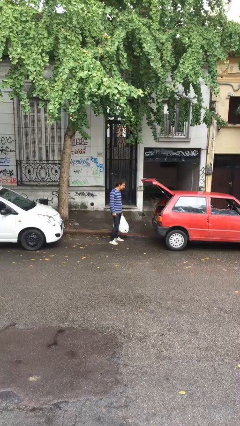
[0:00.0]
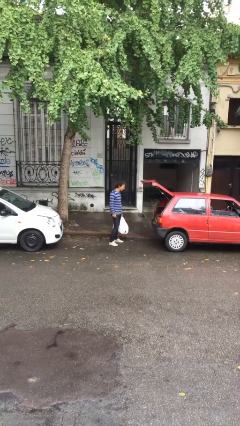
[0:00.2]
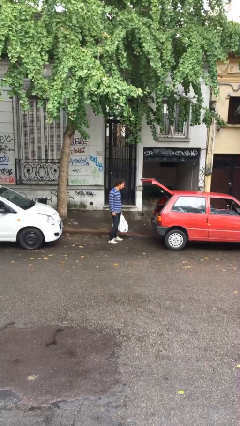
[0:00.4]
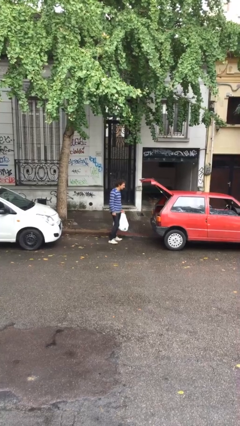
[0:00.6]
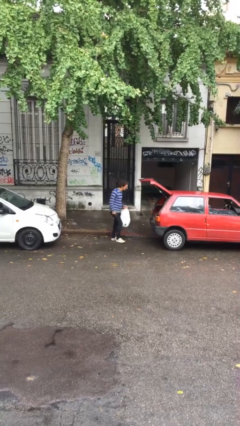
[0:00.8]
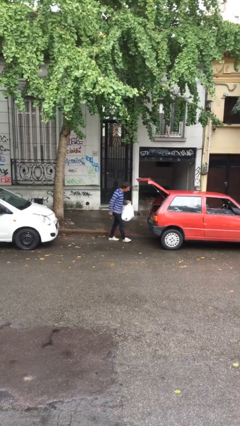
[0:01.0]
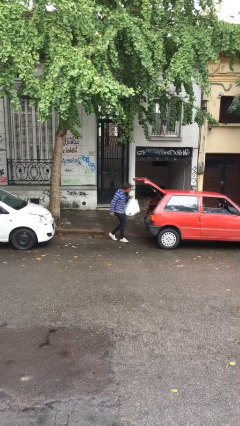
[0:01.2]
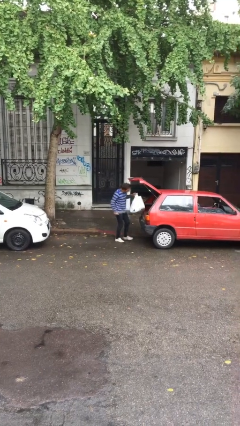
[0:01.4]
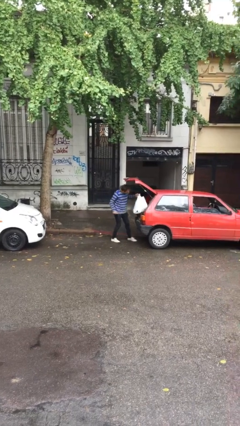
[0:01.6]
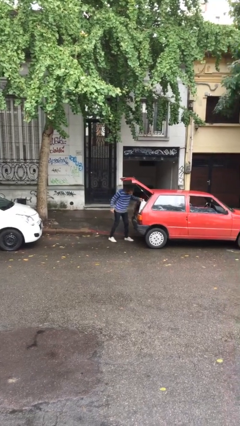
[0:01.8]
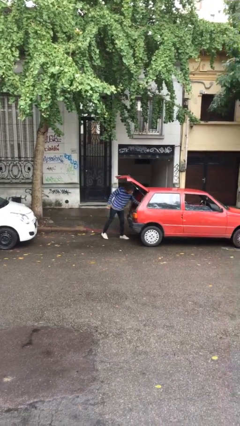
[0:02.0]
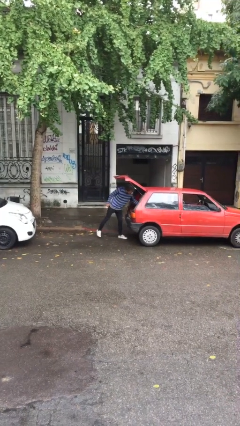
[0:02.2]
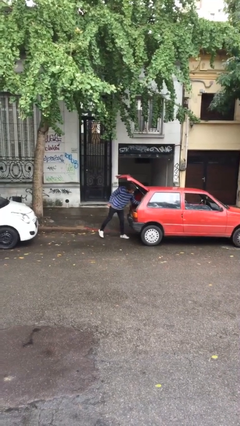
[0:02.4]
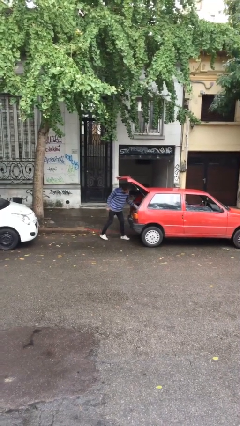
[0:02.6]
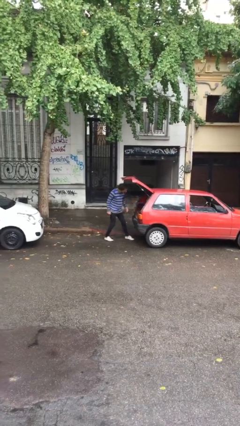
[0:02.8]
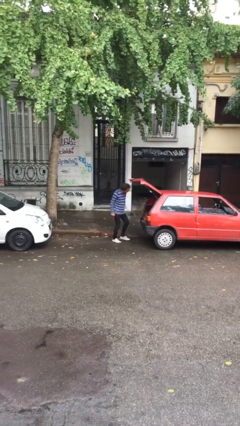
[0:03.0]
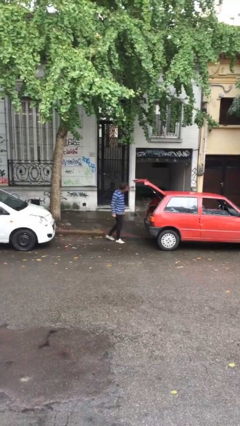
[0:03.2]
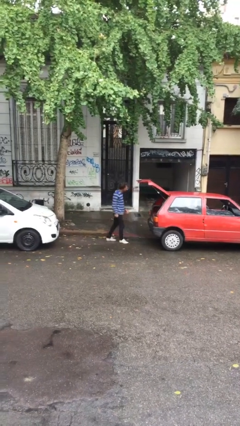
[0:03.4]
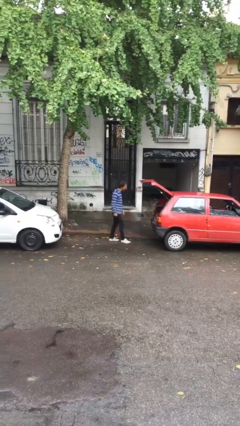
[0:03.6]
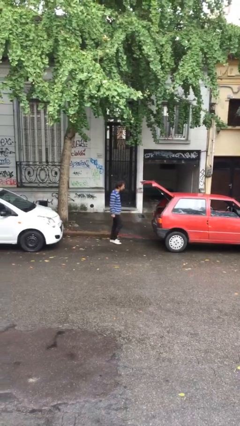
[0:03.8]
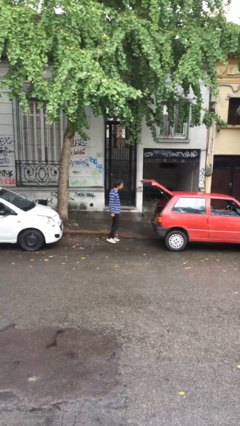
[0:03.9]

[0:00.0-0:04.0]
person loads car

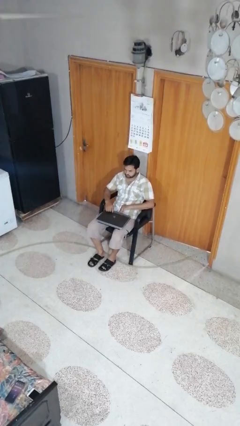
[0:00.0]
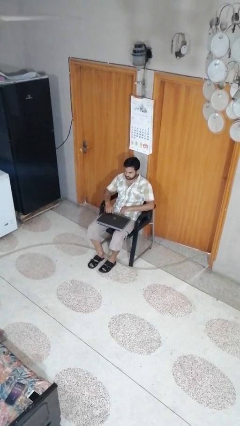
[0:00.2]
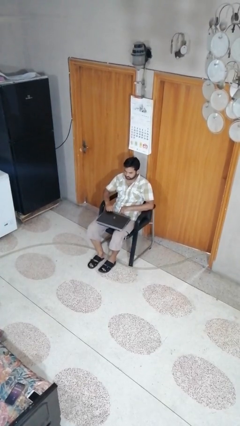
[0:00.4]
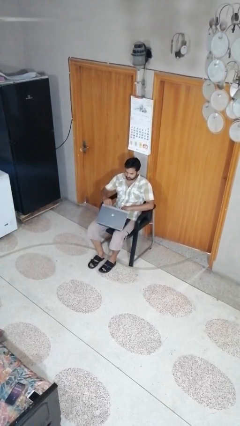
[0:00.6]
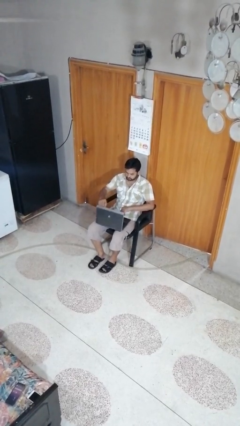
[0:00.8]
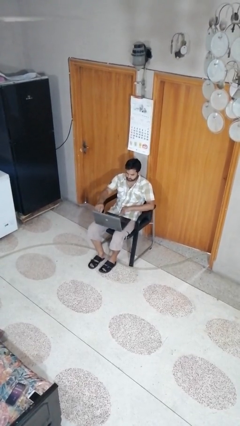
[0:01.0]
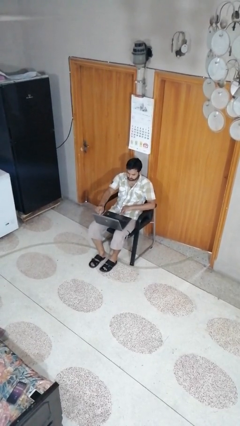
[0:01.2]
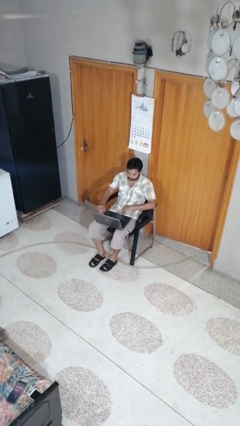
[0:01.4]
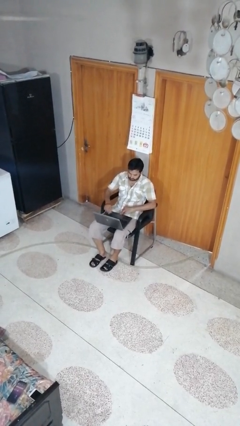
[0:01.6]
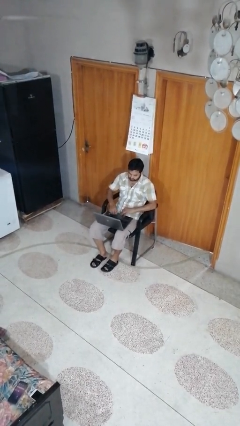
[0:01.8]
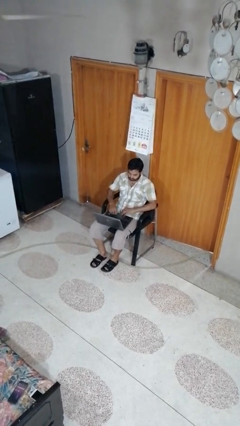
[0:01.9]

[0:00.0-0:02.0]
person opens laptop

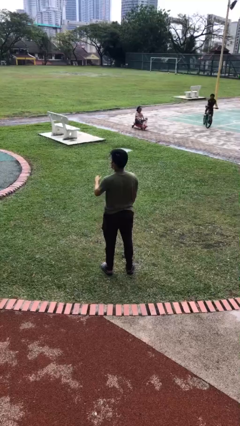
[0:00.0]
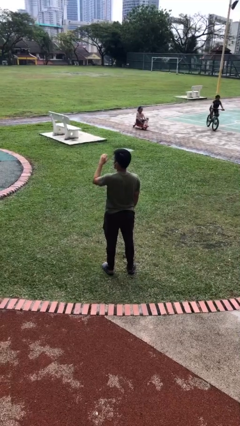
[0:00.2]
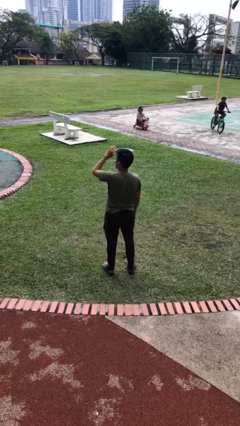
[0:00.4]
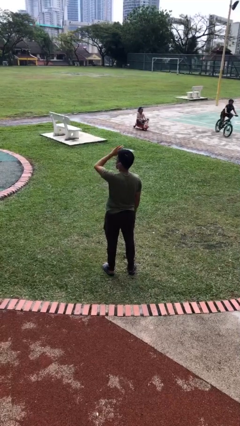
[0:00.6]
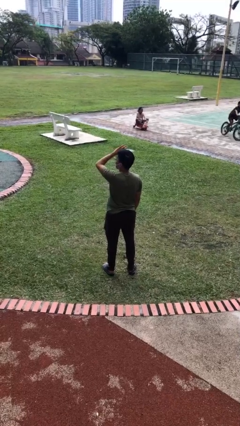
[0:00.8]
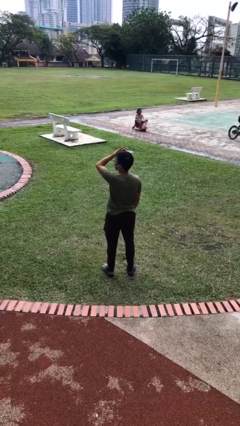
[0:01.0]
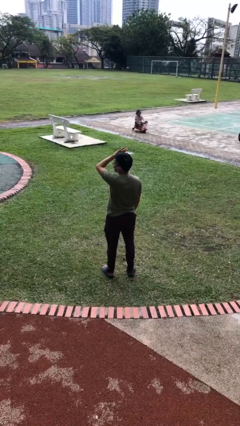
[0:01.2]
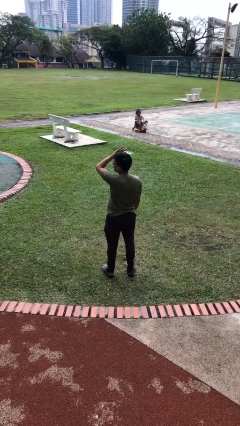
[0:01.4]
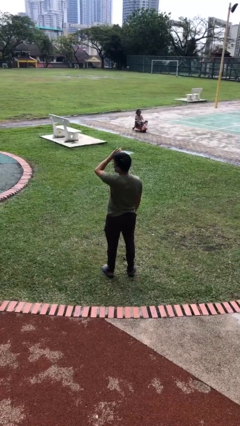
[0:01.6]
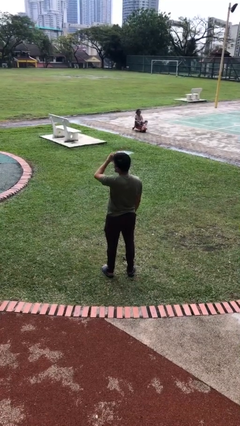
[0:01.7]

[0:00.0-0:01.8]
person shades eyes

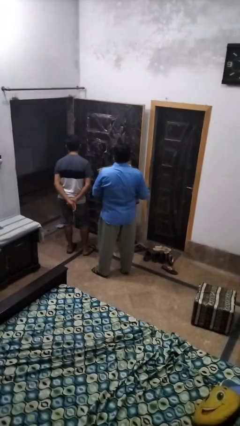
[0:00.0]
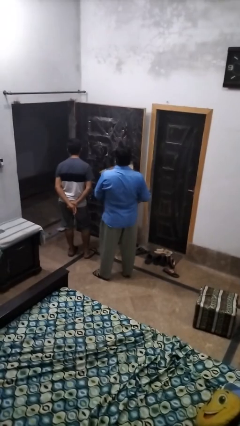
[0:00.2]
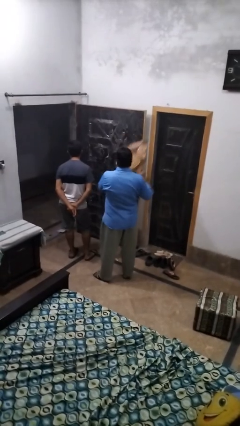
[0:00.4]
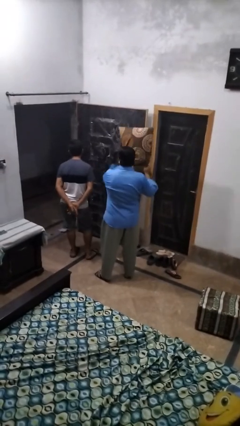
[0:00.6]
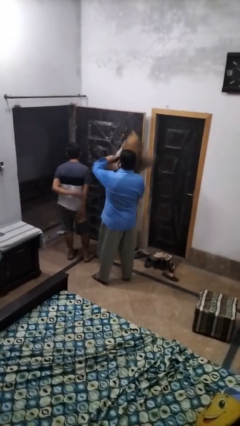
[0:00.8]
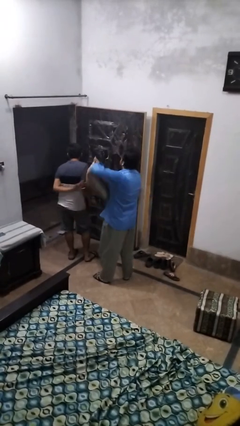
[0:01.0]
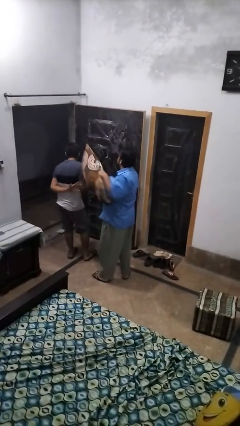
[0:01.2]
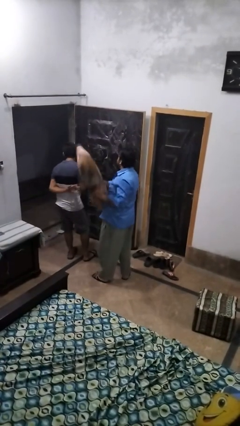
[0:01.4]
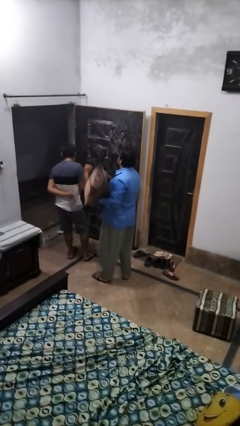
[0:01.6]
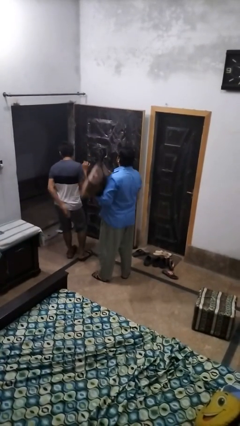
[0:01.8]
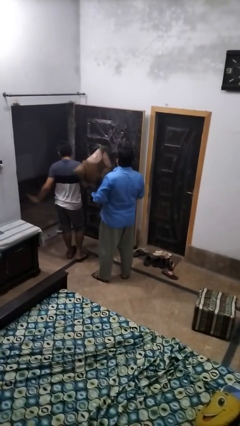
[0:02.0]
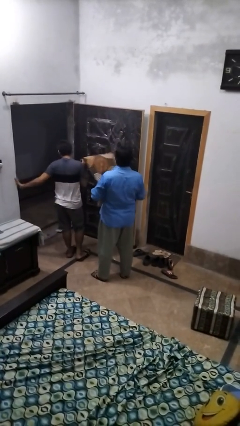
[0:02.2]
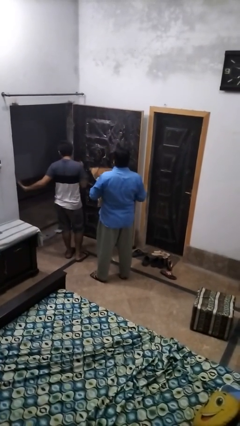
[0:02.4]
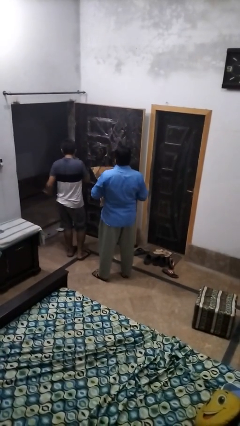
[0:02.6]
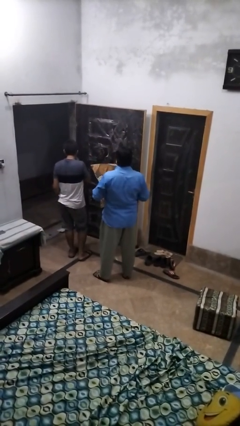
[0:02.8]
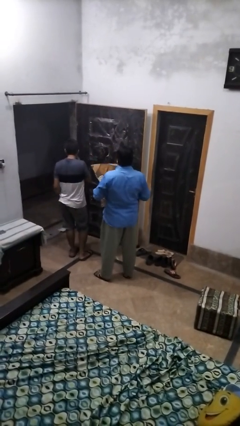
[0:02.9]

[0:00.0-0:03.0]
person hits person with pillow

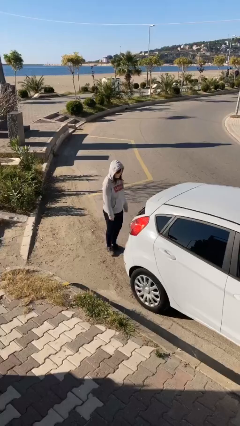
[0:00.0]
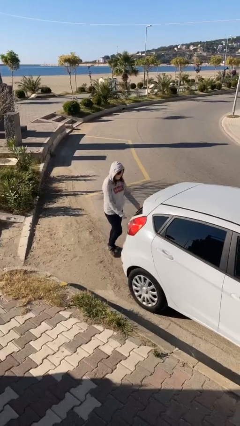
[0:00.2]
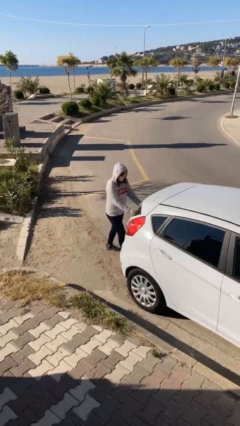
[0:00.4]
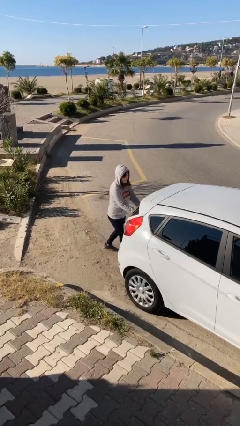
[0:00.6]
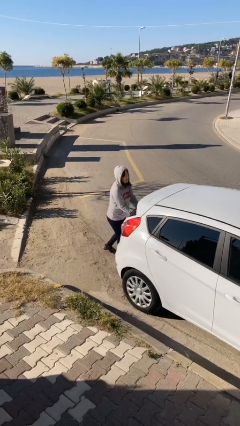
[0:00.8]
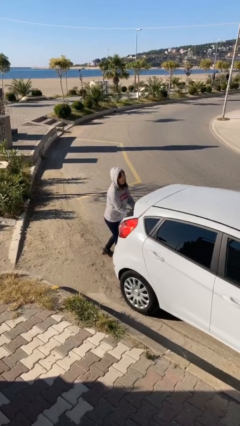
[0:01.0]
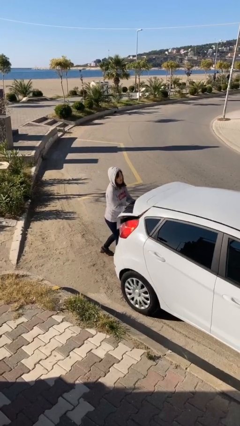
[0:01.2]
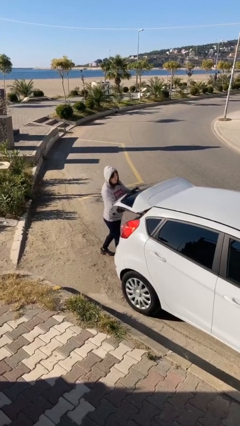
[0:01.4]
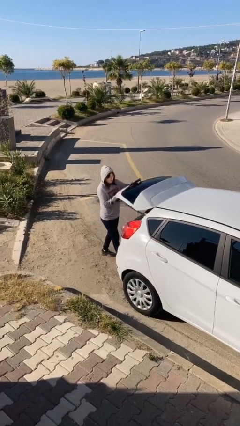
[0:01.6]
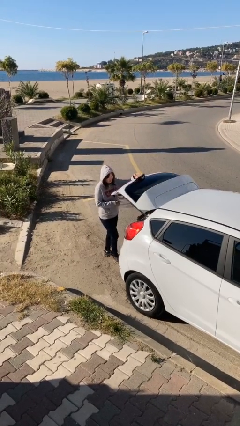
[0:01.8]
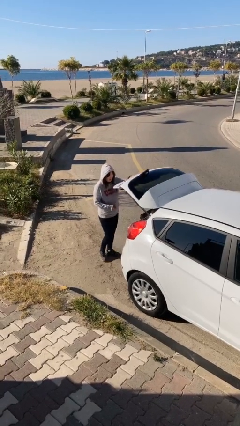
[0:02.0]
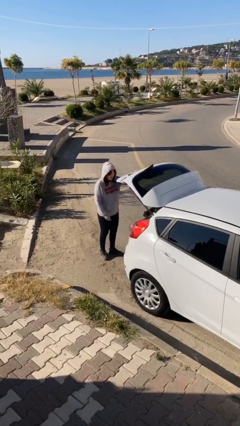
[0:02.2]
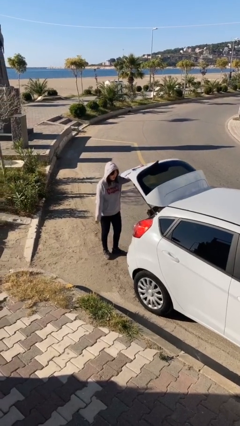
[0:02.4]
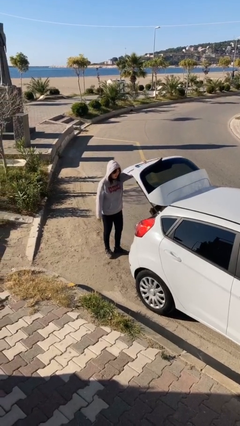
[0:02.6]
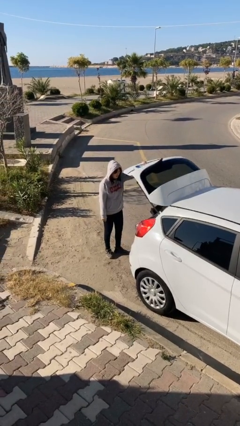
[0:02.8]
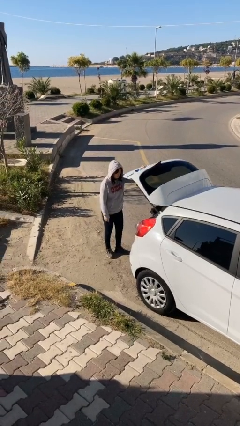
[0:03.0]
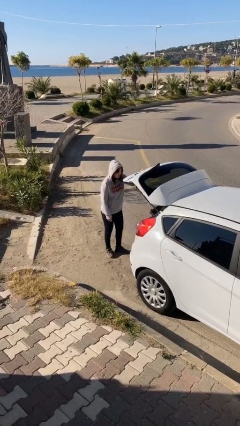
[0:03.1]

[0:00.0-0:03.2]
person opens car trunk

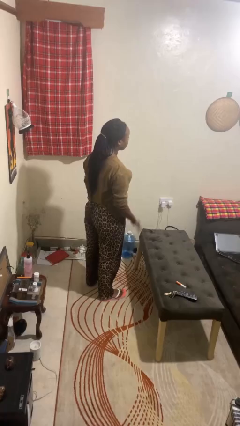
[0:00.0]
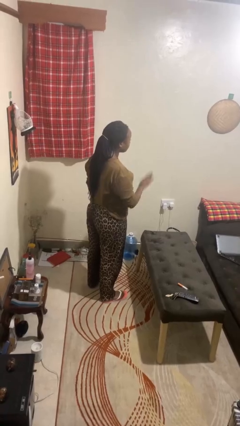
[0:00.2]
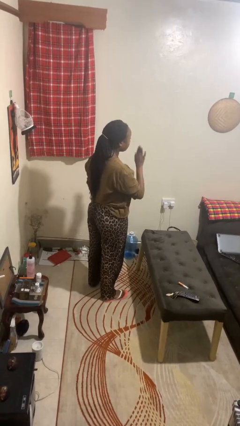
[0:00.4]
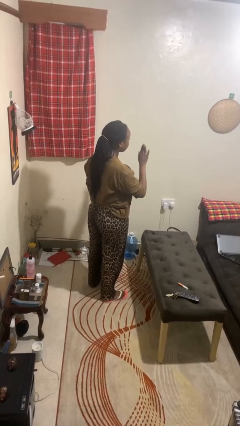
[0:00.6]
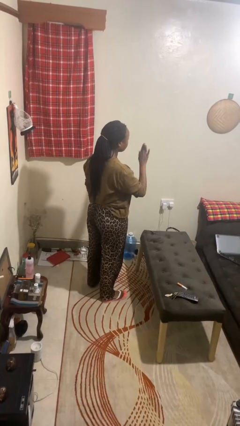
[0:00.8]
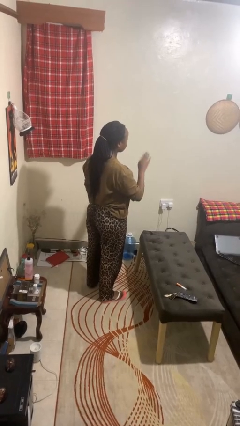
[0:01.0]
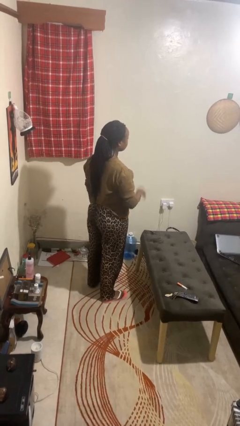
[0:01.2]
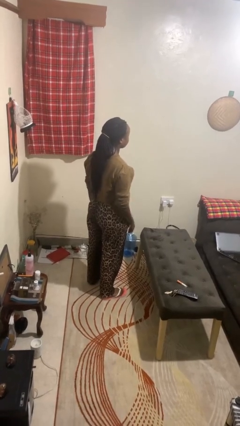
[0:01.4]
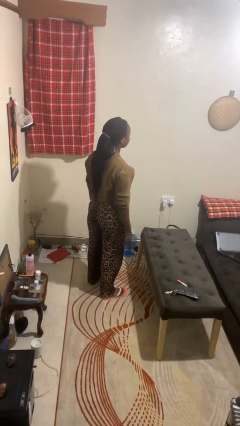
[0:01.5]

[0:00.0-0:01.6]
person gestures stop

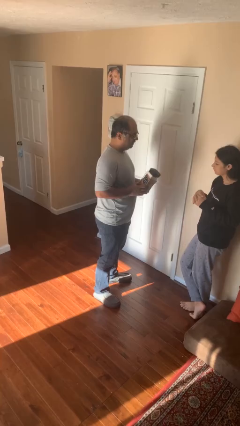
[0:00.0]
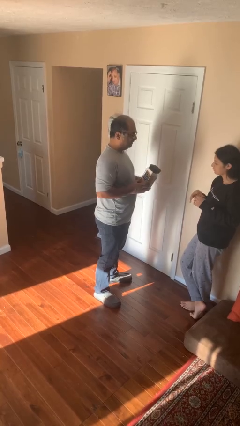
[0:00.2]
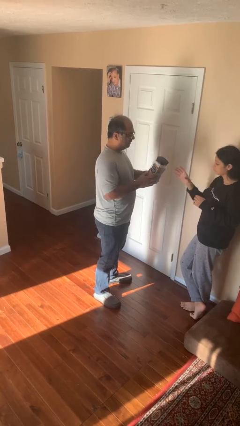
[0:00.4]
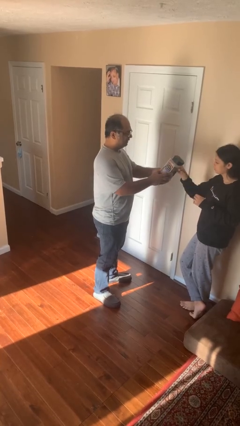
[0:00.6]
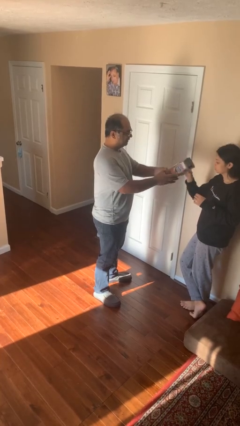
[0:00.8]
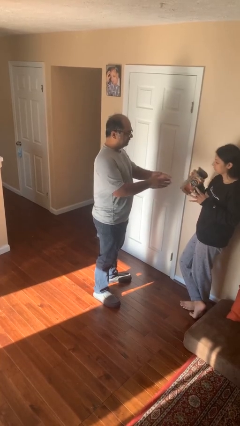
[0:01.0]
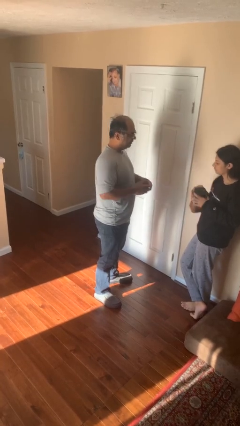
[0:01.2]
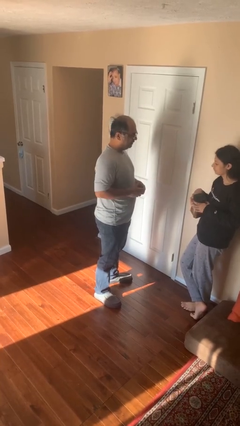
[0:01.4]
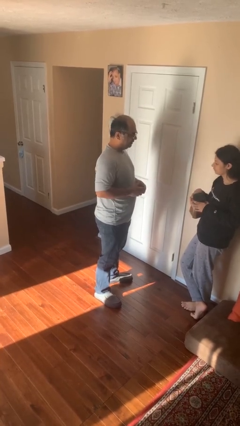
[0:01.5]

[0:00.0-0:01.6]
person transfers object to person
